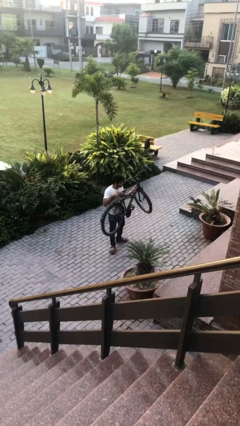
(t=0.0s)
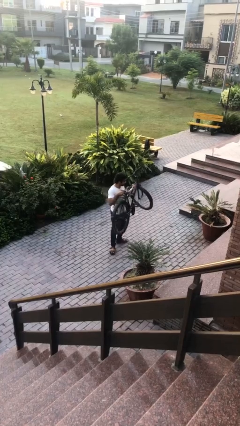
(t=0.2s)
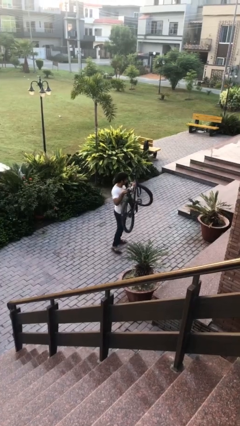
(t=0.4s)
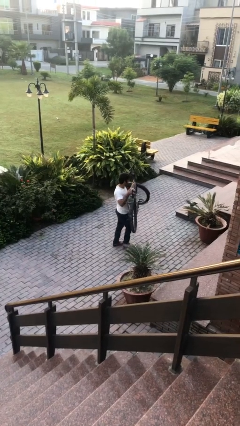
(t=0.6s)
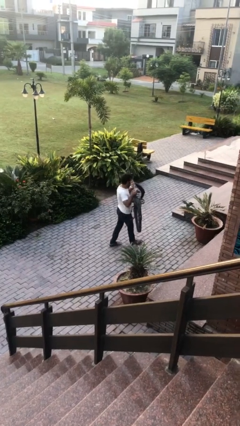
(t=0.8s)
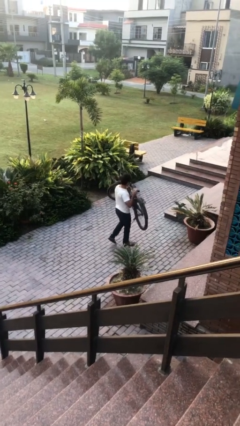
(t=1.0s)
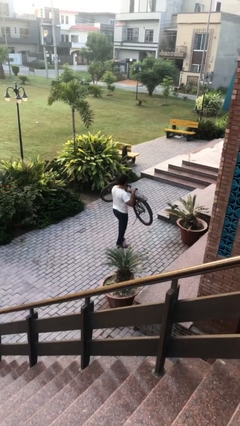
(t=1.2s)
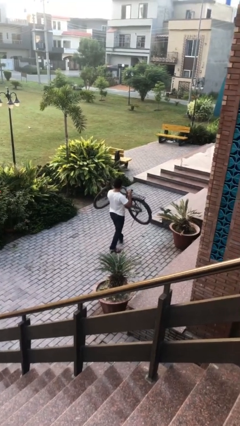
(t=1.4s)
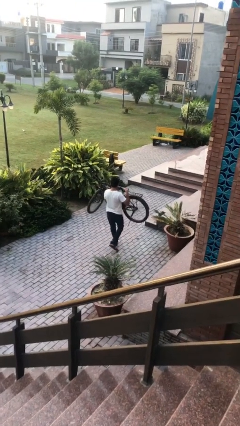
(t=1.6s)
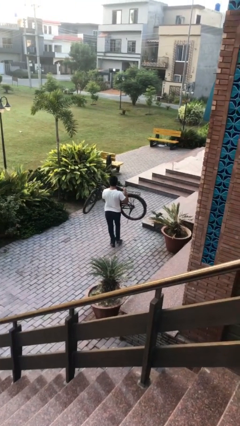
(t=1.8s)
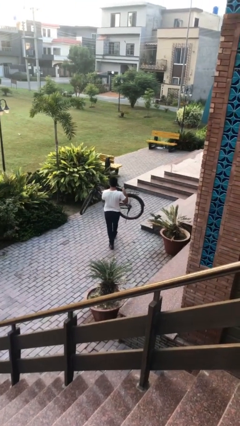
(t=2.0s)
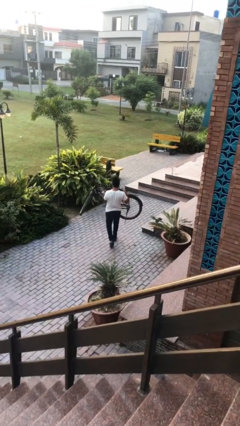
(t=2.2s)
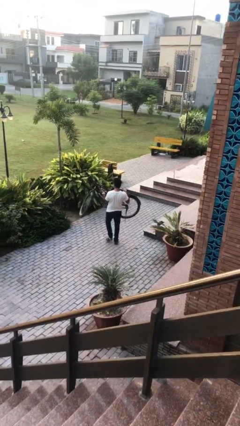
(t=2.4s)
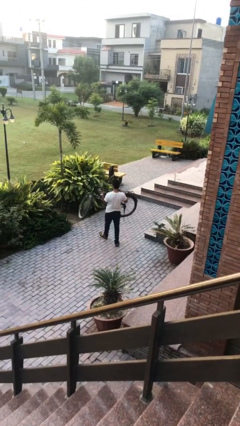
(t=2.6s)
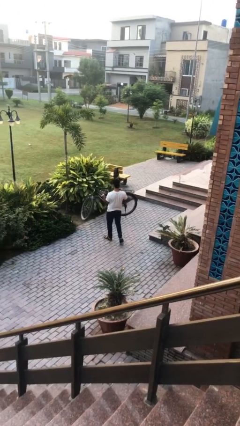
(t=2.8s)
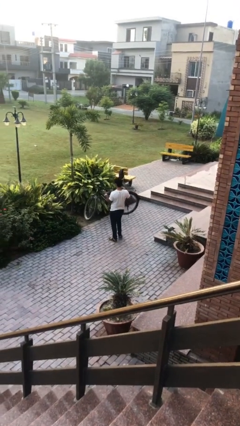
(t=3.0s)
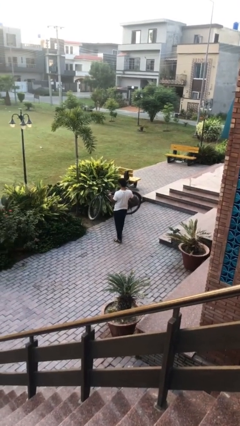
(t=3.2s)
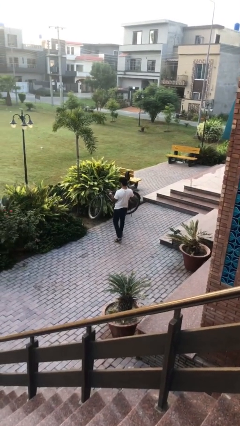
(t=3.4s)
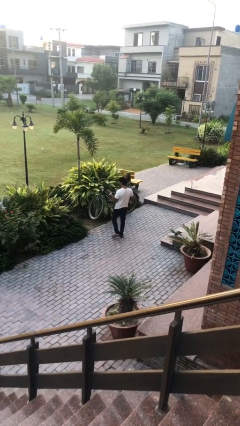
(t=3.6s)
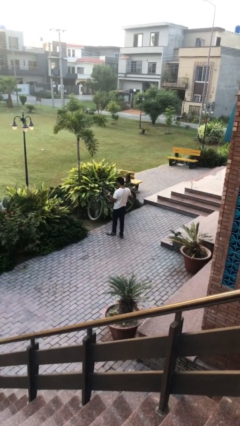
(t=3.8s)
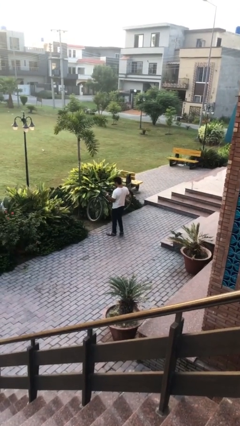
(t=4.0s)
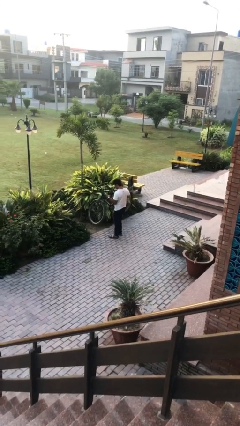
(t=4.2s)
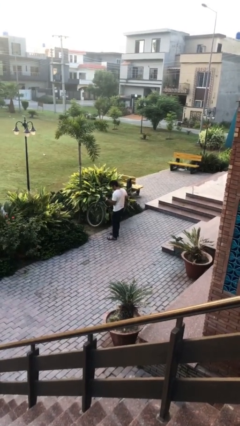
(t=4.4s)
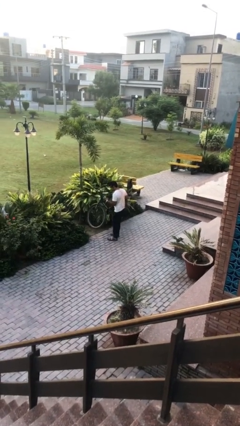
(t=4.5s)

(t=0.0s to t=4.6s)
person carries heavy object

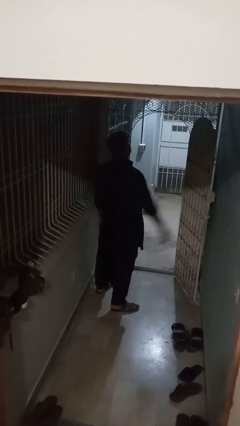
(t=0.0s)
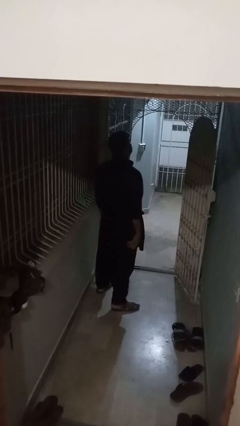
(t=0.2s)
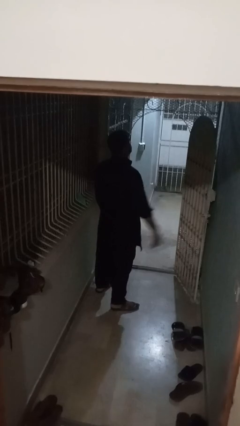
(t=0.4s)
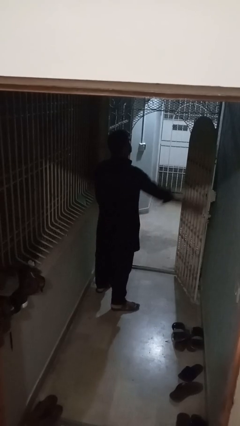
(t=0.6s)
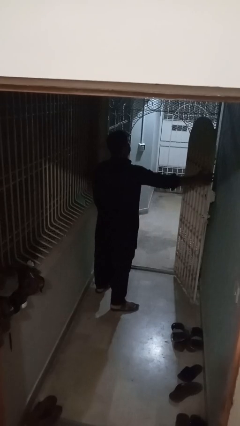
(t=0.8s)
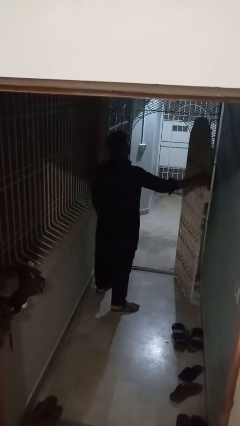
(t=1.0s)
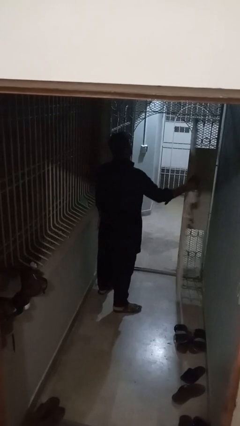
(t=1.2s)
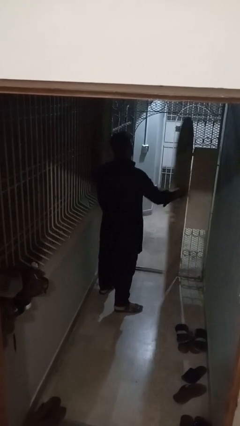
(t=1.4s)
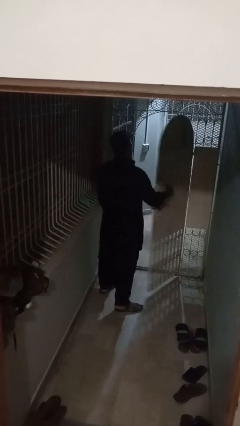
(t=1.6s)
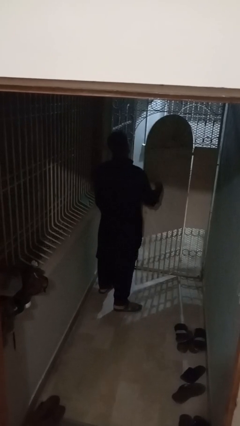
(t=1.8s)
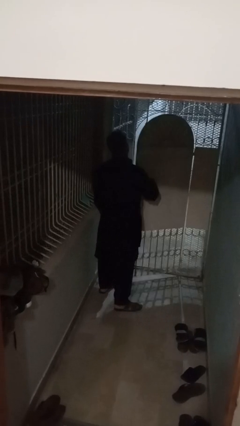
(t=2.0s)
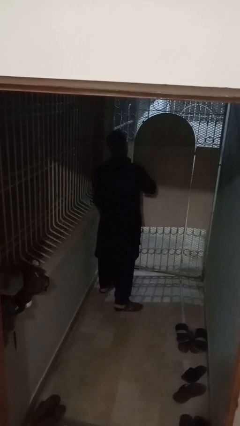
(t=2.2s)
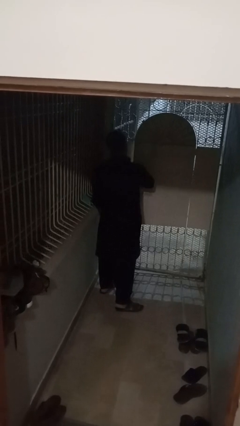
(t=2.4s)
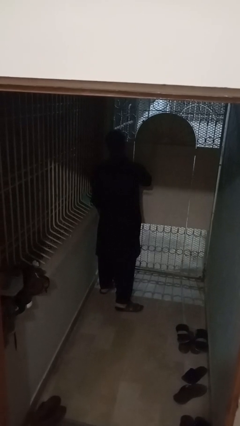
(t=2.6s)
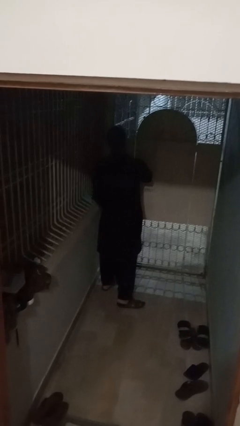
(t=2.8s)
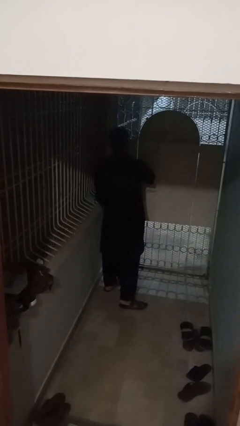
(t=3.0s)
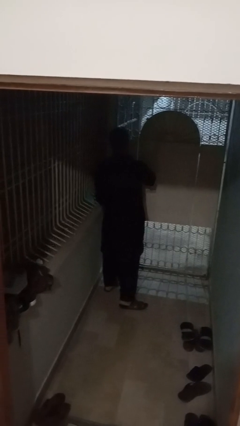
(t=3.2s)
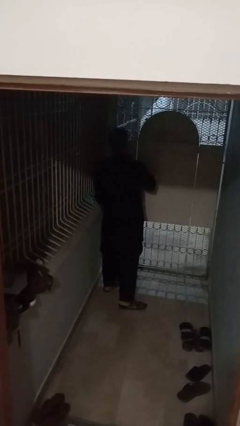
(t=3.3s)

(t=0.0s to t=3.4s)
person closes gate

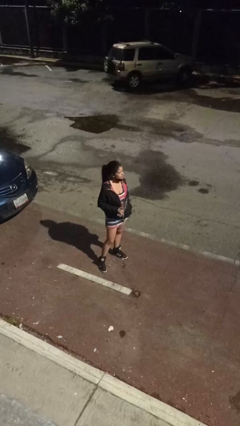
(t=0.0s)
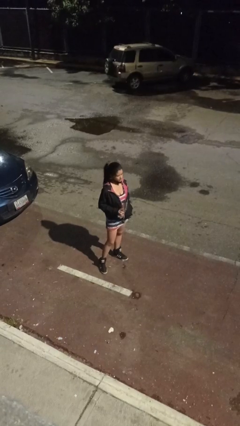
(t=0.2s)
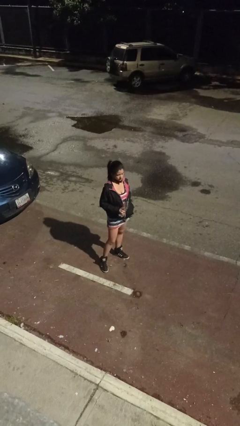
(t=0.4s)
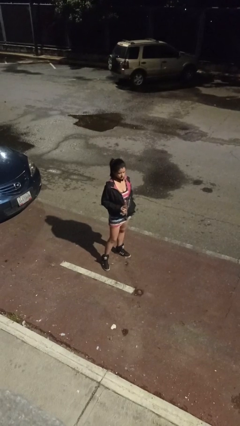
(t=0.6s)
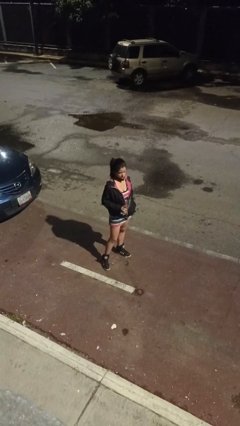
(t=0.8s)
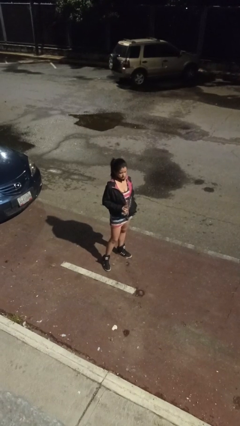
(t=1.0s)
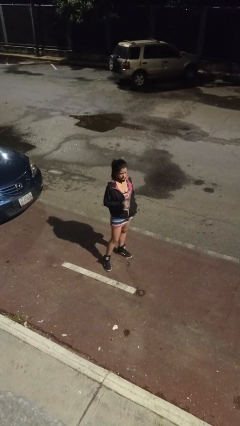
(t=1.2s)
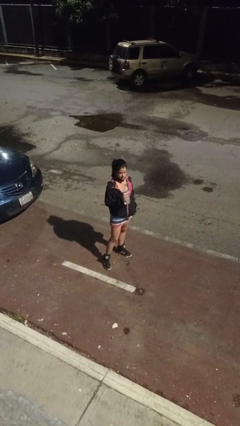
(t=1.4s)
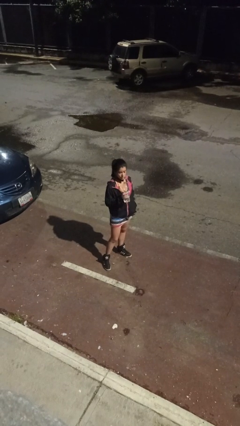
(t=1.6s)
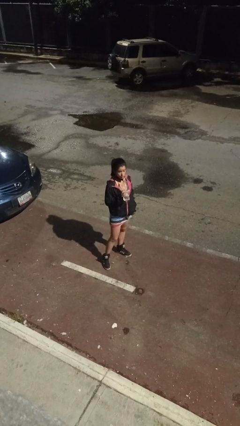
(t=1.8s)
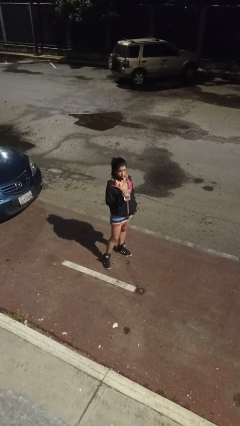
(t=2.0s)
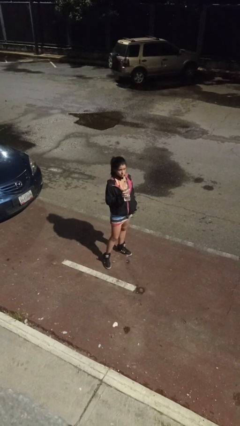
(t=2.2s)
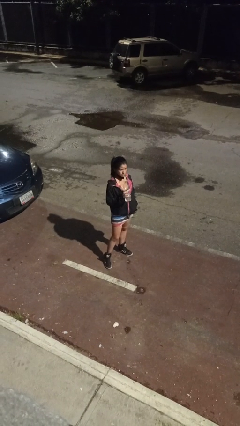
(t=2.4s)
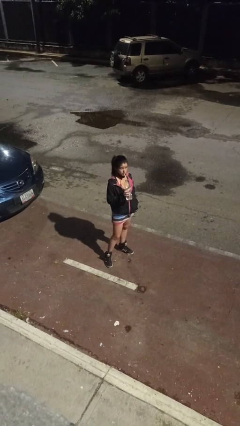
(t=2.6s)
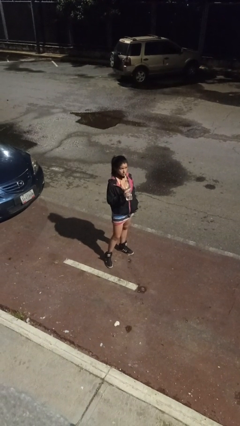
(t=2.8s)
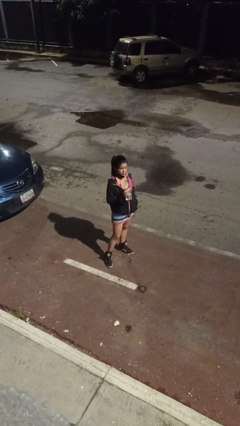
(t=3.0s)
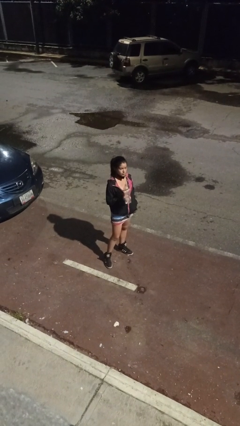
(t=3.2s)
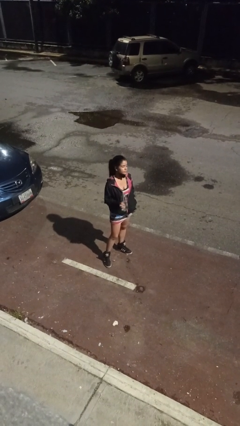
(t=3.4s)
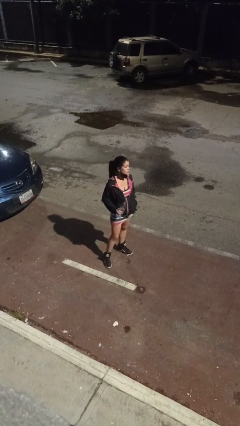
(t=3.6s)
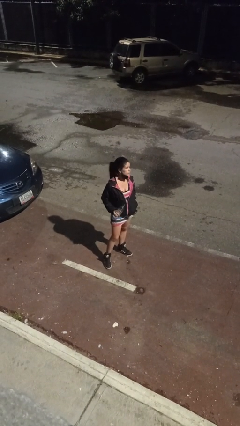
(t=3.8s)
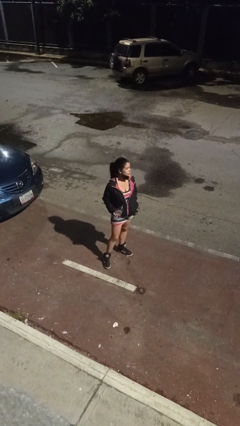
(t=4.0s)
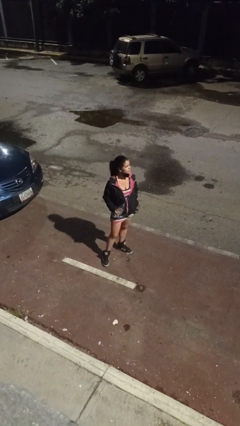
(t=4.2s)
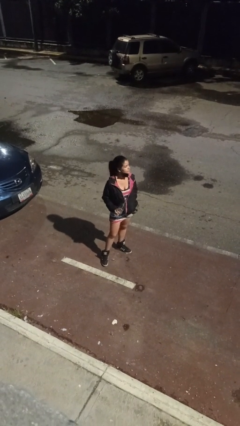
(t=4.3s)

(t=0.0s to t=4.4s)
person drinks from straw

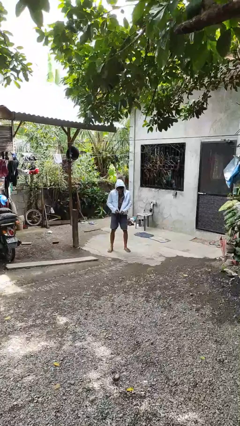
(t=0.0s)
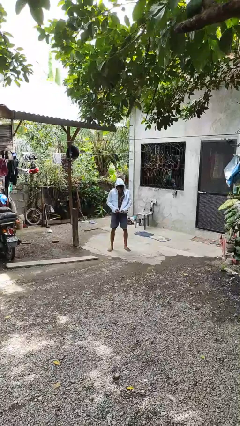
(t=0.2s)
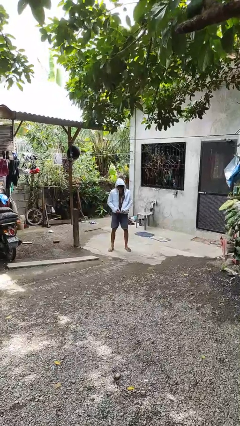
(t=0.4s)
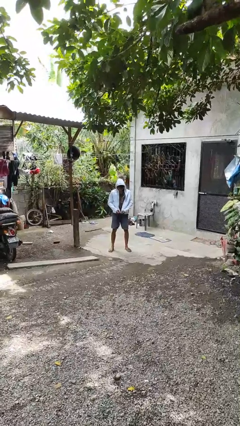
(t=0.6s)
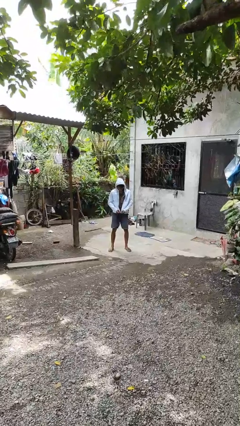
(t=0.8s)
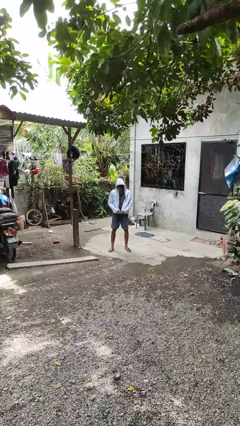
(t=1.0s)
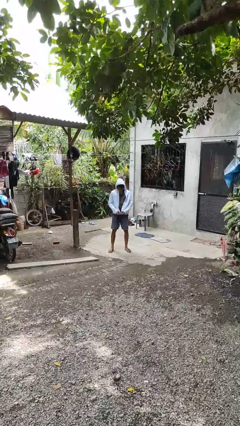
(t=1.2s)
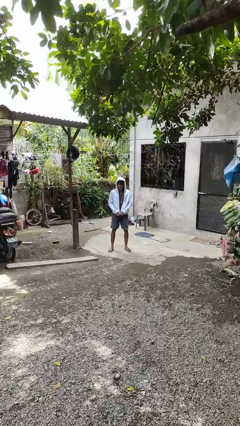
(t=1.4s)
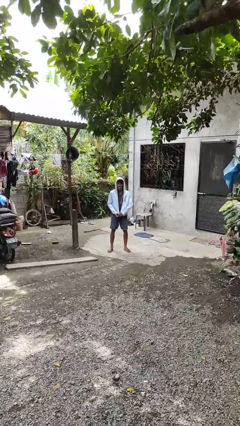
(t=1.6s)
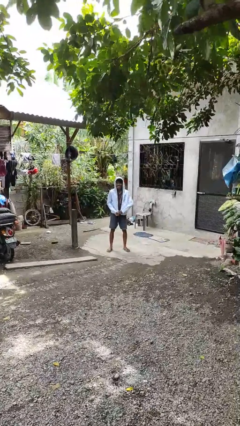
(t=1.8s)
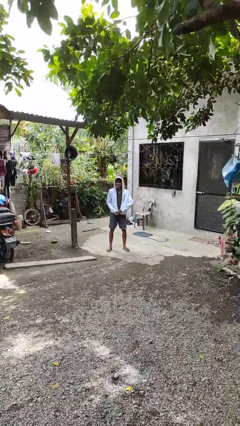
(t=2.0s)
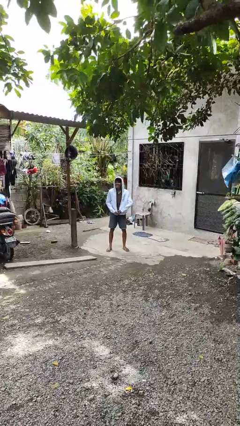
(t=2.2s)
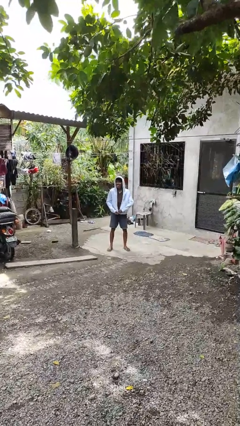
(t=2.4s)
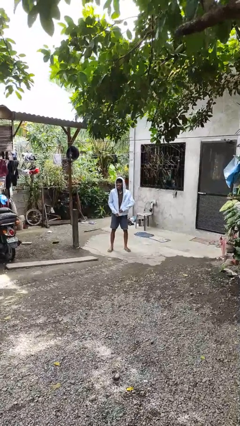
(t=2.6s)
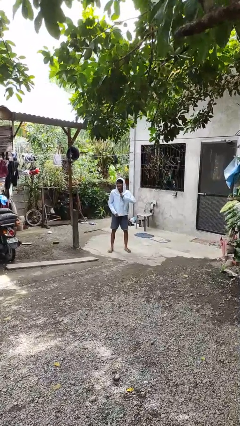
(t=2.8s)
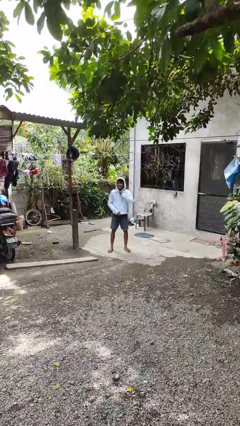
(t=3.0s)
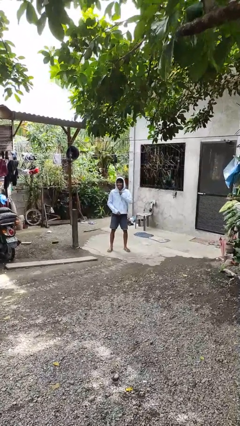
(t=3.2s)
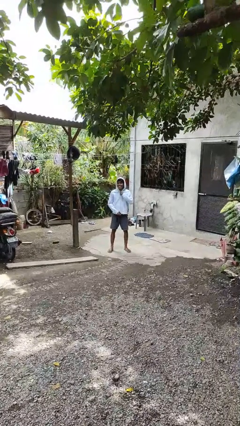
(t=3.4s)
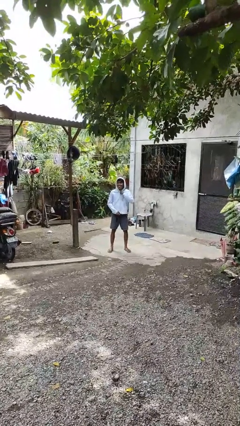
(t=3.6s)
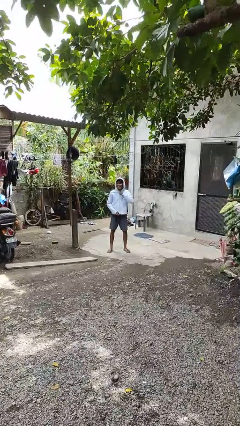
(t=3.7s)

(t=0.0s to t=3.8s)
person zips up jacket

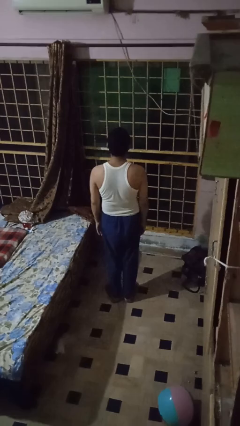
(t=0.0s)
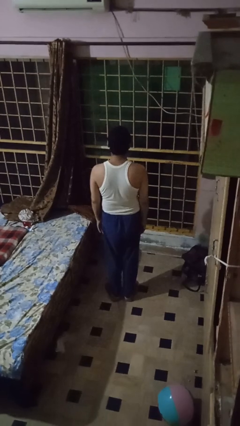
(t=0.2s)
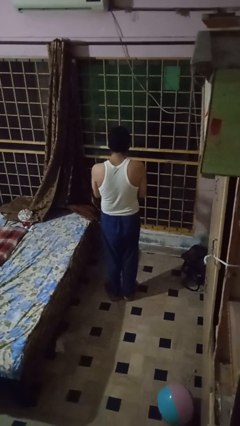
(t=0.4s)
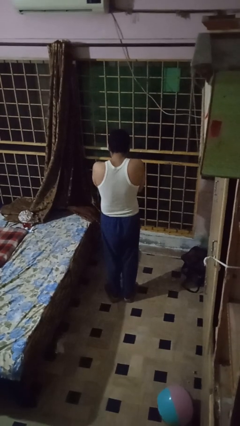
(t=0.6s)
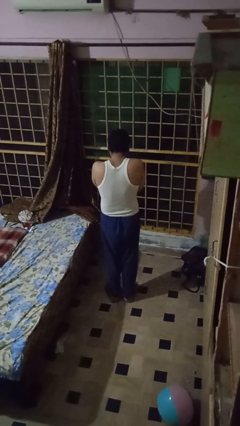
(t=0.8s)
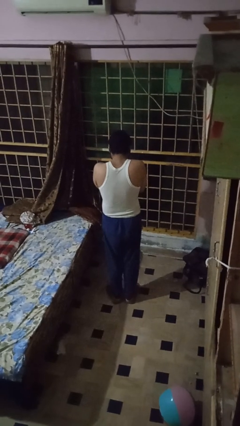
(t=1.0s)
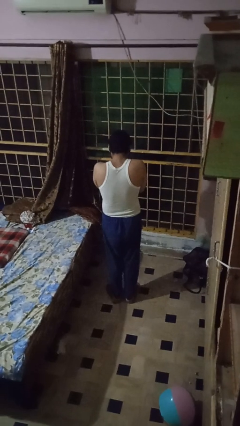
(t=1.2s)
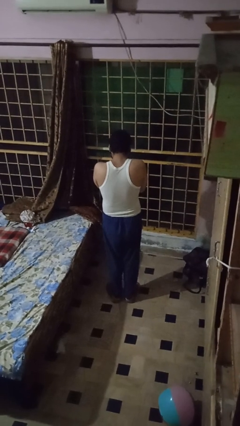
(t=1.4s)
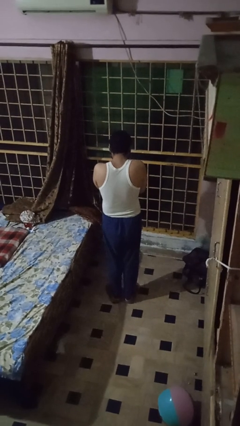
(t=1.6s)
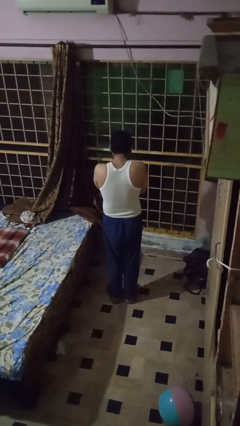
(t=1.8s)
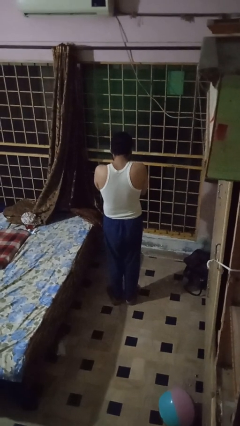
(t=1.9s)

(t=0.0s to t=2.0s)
person covers face with hands
